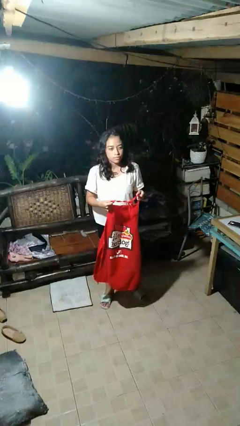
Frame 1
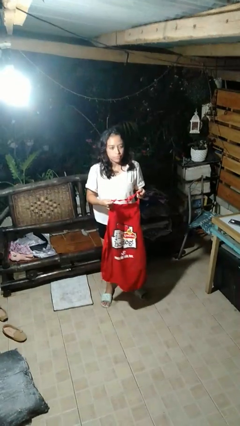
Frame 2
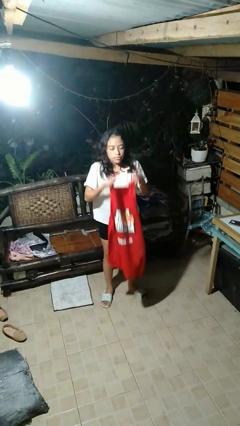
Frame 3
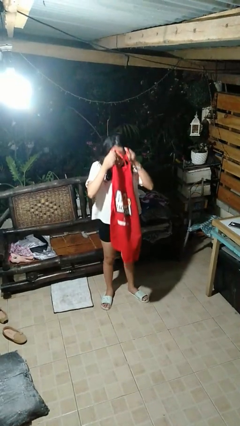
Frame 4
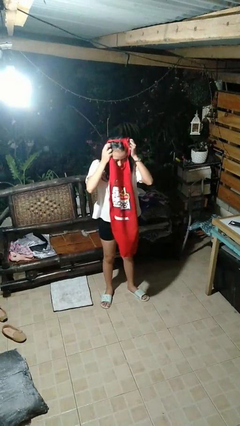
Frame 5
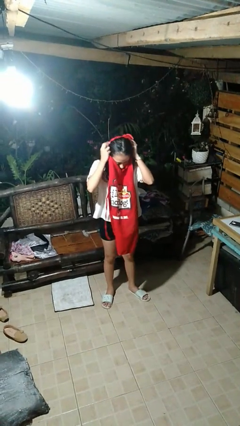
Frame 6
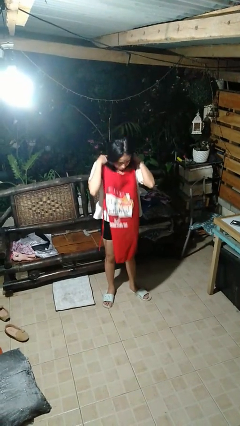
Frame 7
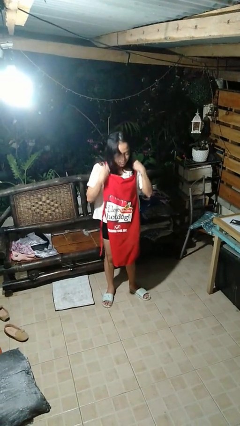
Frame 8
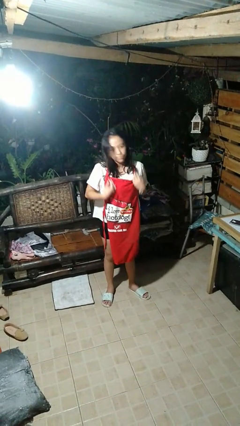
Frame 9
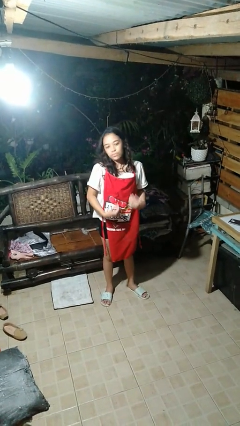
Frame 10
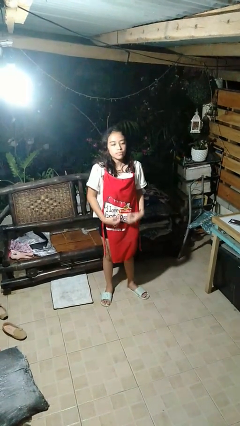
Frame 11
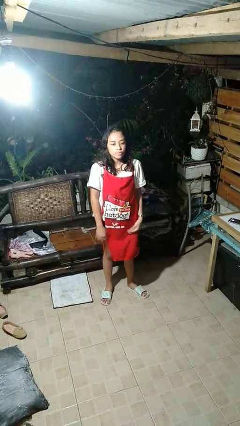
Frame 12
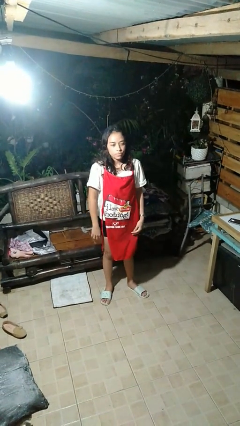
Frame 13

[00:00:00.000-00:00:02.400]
person puts on apron

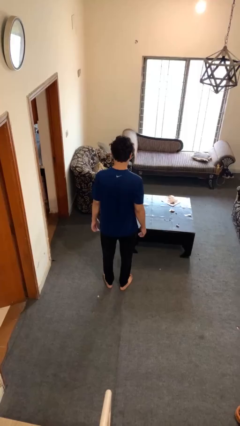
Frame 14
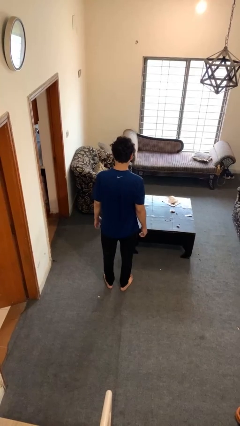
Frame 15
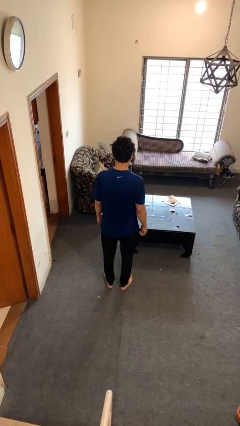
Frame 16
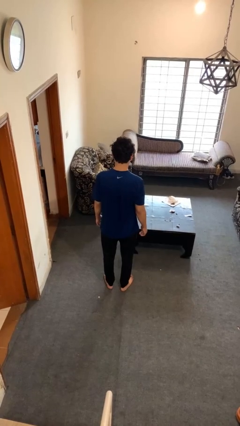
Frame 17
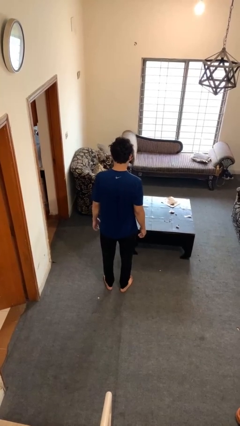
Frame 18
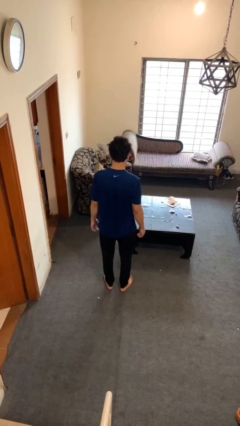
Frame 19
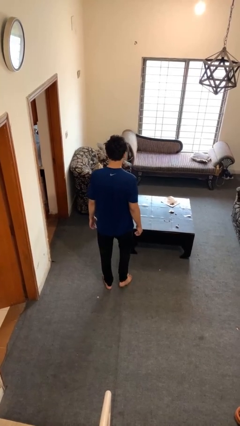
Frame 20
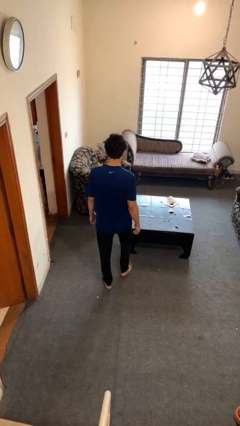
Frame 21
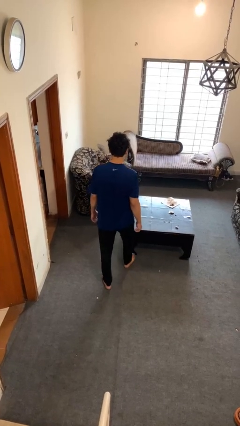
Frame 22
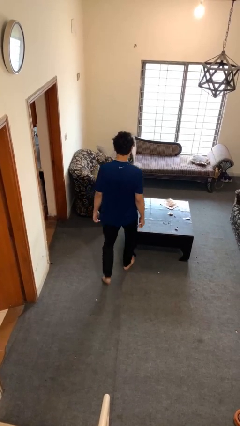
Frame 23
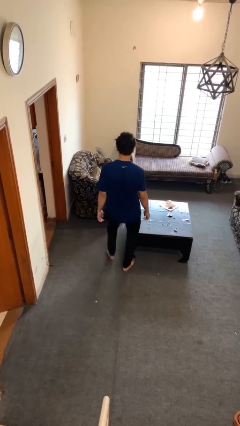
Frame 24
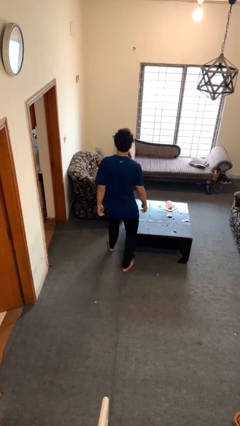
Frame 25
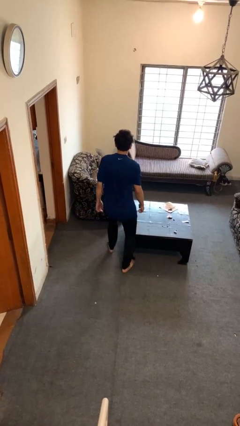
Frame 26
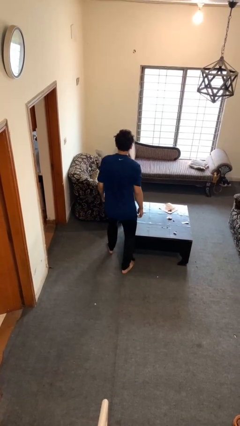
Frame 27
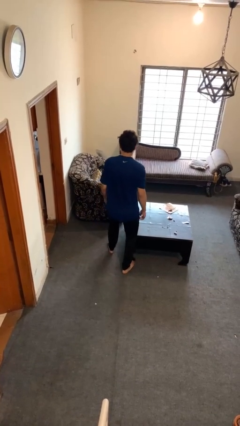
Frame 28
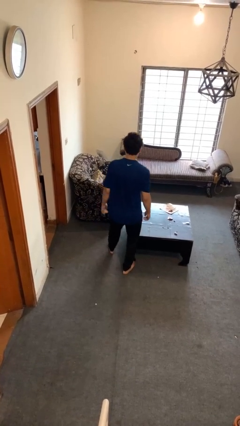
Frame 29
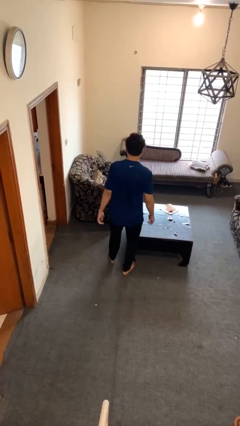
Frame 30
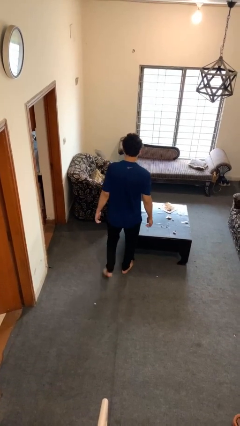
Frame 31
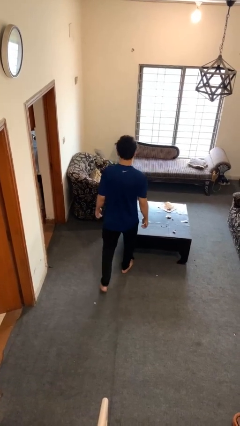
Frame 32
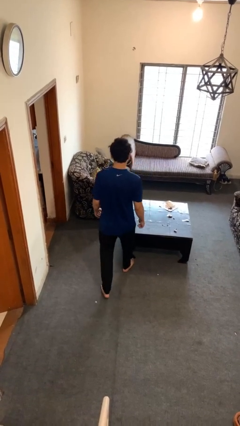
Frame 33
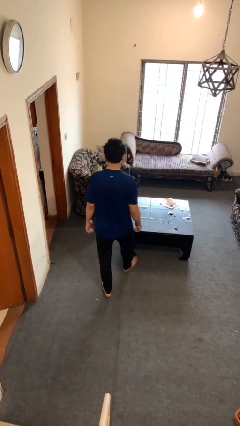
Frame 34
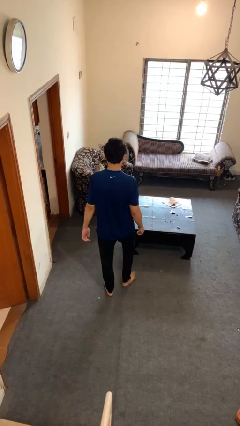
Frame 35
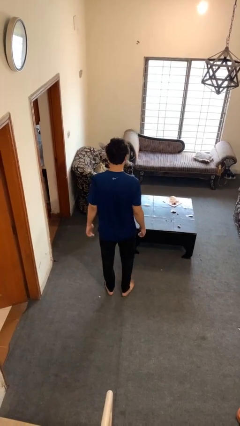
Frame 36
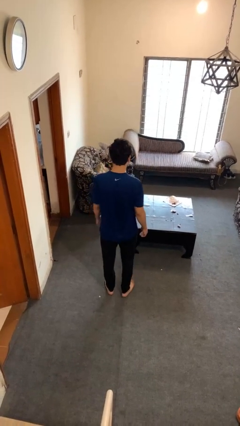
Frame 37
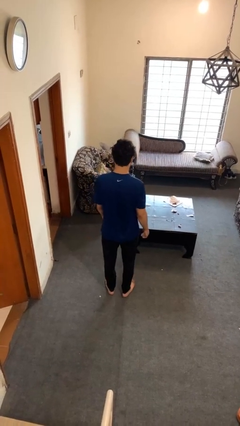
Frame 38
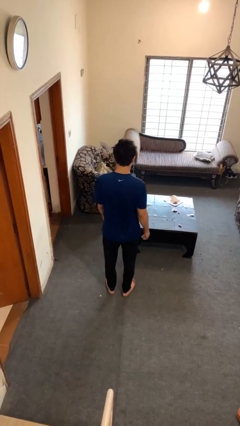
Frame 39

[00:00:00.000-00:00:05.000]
person bumps into table

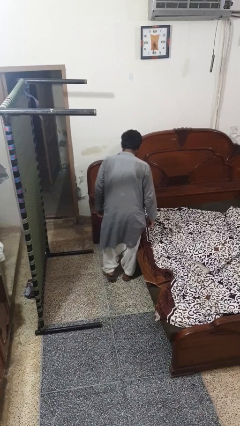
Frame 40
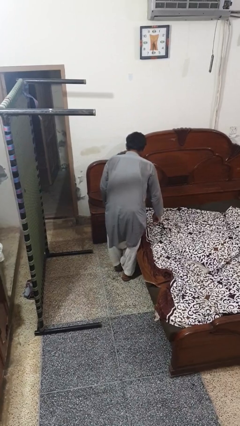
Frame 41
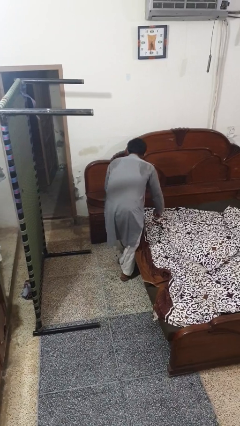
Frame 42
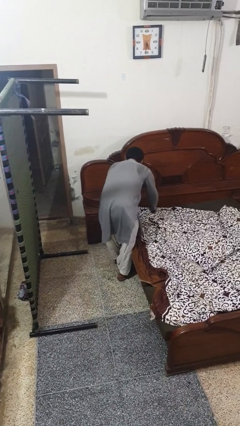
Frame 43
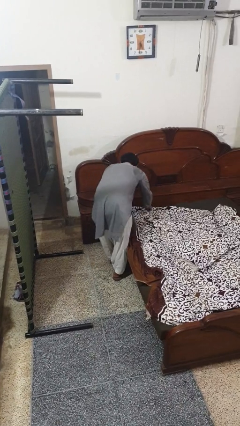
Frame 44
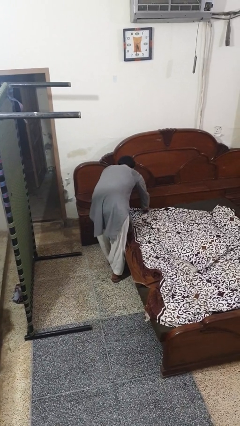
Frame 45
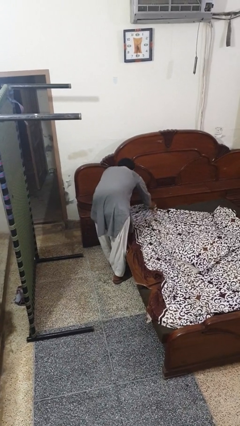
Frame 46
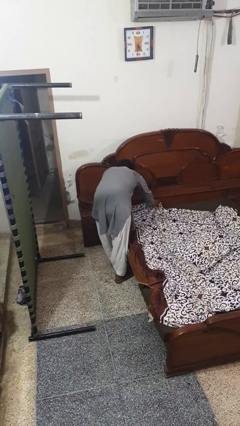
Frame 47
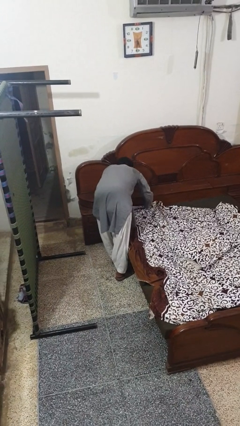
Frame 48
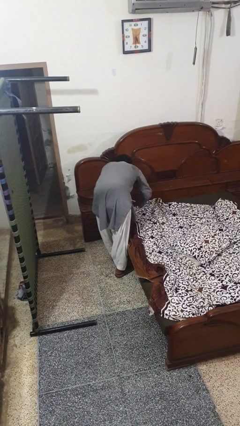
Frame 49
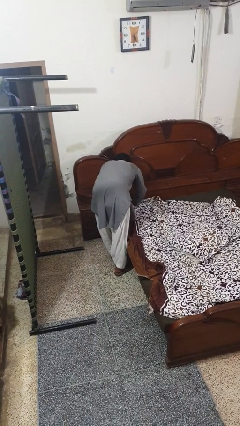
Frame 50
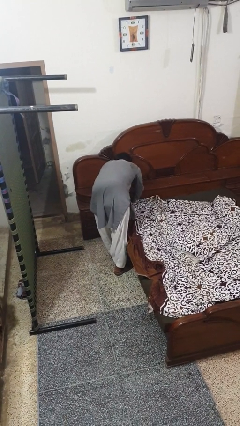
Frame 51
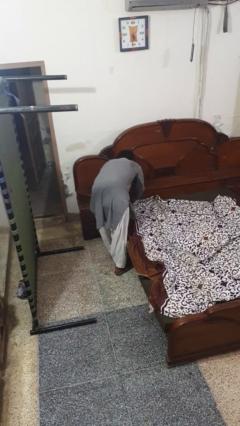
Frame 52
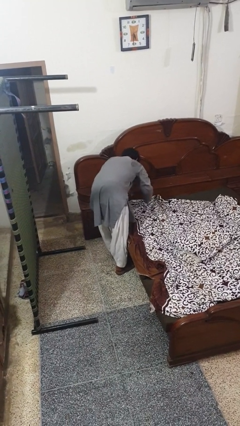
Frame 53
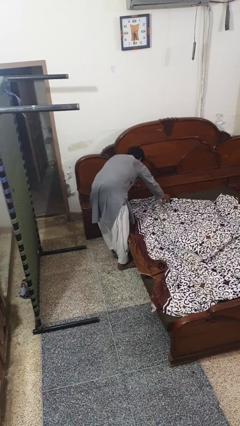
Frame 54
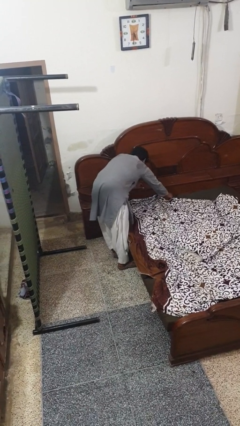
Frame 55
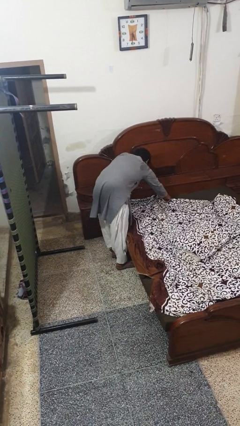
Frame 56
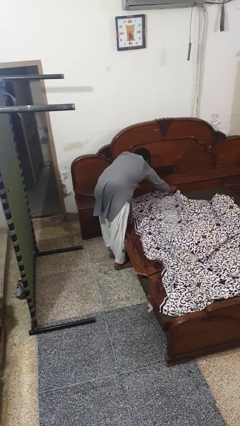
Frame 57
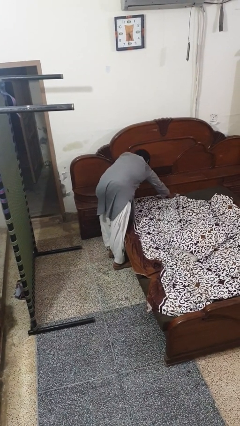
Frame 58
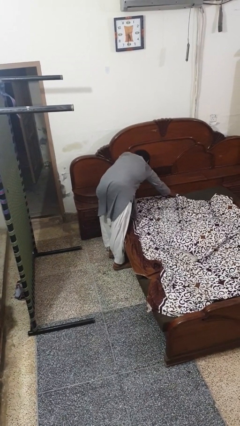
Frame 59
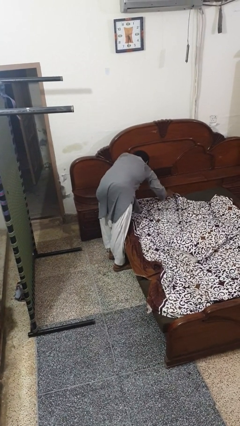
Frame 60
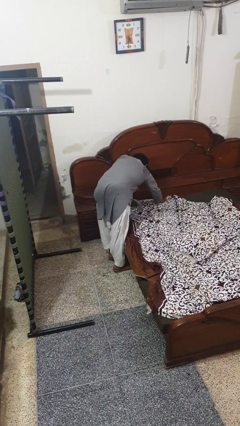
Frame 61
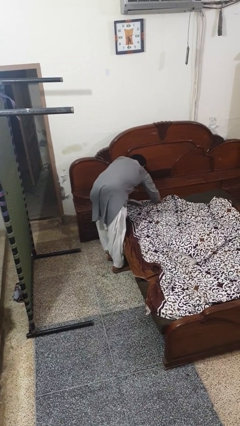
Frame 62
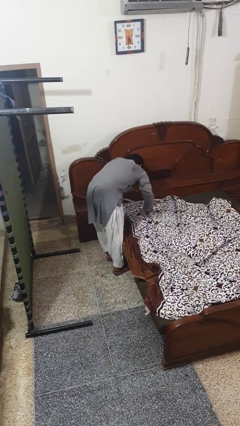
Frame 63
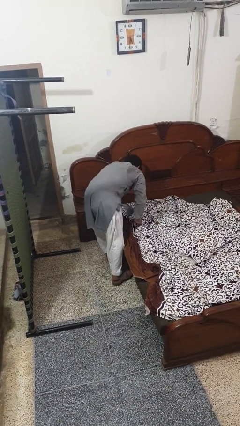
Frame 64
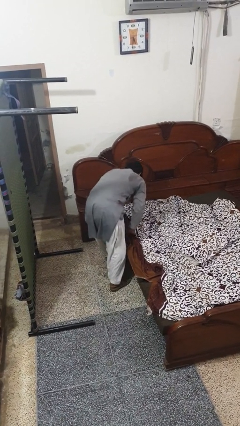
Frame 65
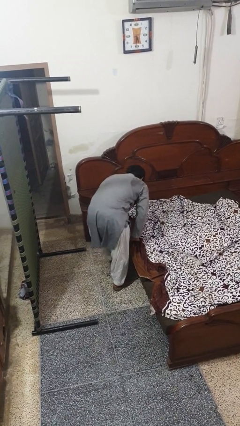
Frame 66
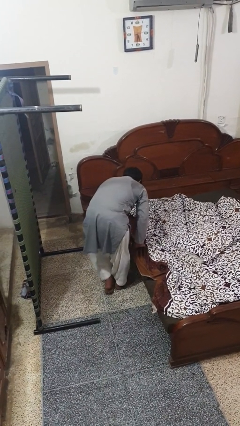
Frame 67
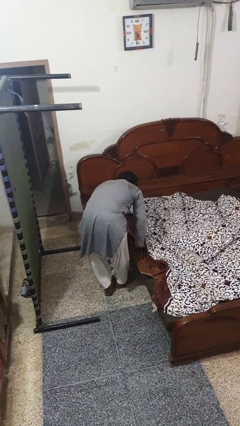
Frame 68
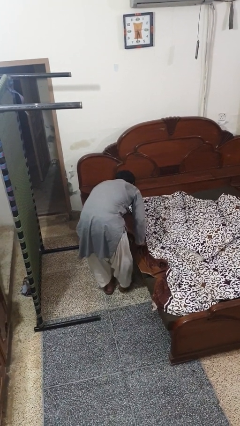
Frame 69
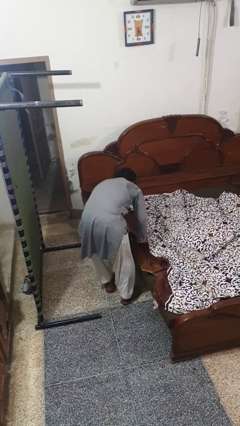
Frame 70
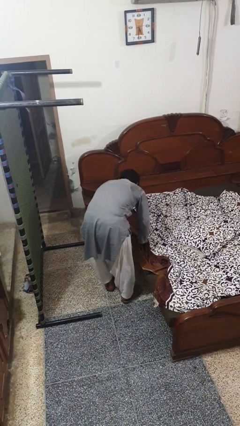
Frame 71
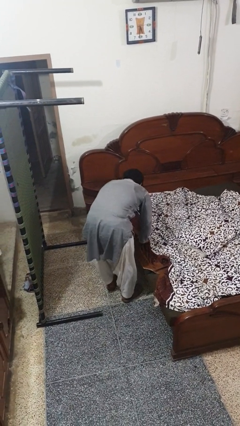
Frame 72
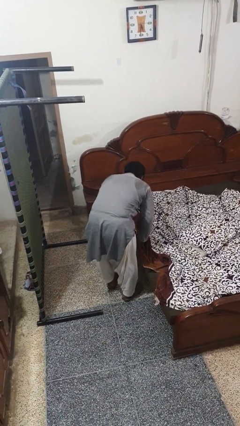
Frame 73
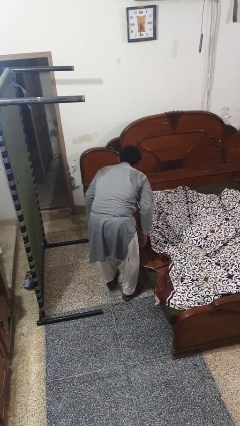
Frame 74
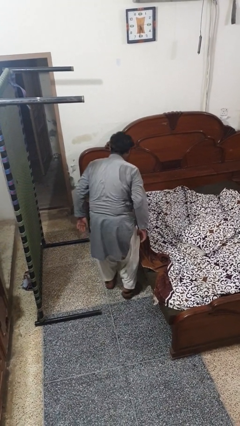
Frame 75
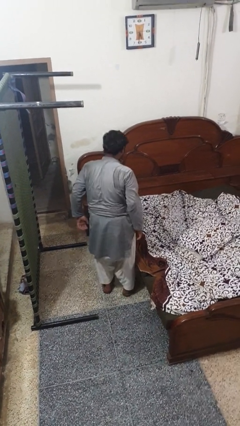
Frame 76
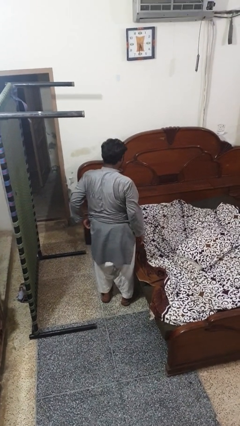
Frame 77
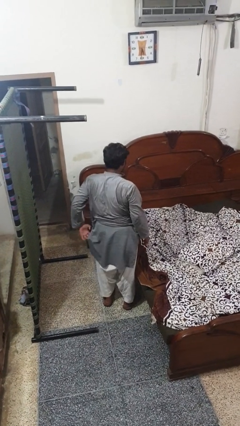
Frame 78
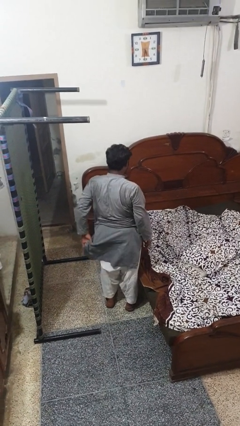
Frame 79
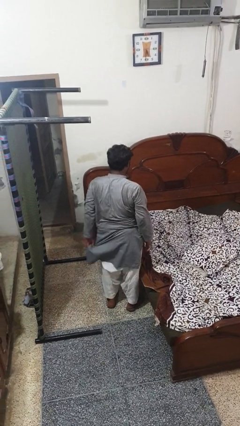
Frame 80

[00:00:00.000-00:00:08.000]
person makes bed

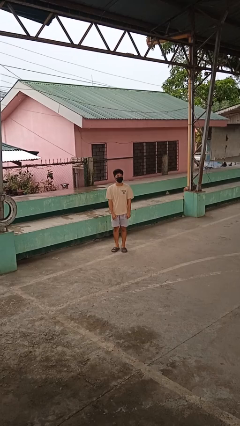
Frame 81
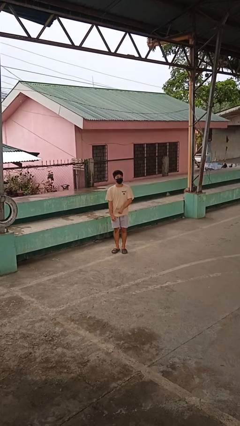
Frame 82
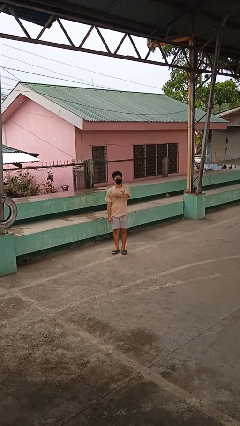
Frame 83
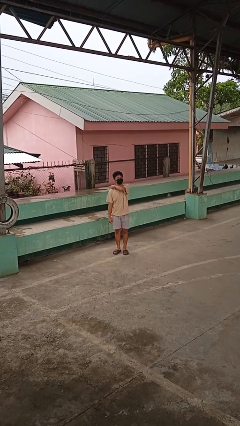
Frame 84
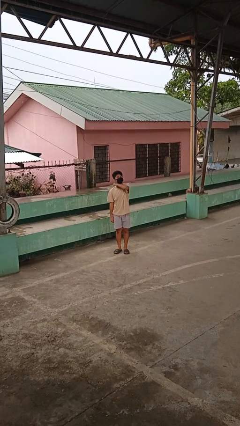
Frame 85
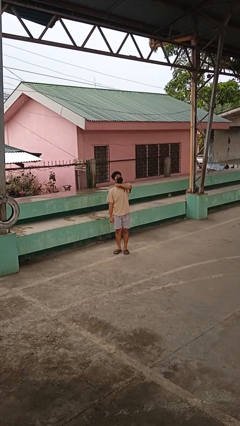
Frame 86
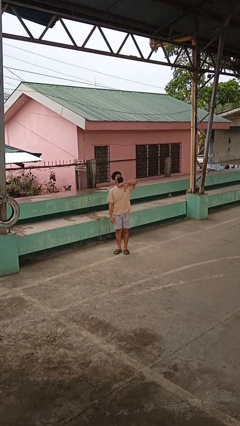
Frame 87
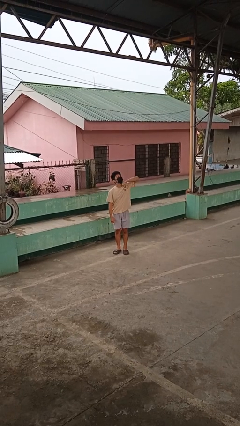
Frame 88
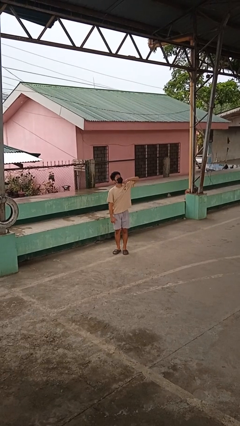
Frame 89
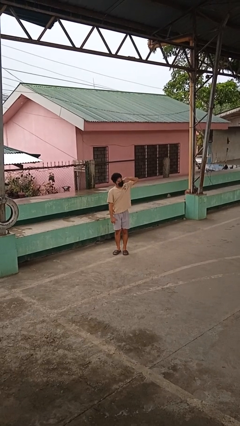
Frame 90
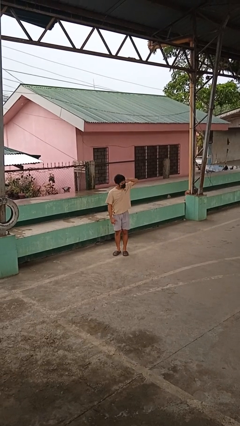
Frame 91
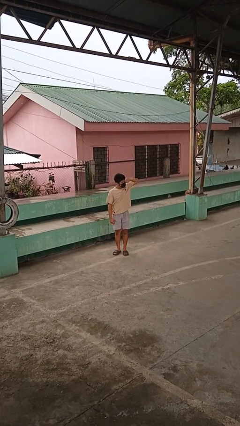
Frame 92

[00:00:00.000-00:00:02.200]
person gestures cut

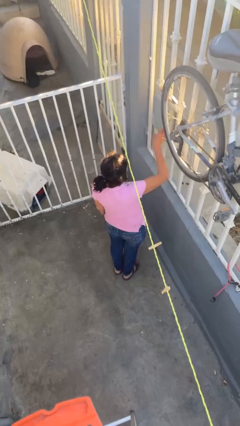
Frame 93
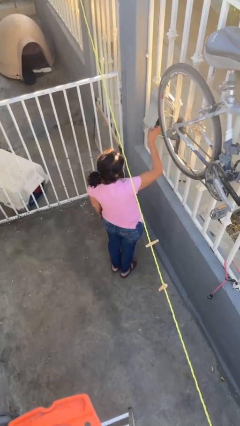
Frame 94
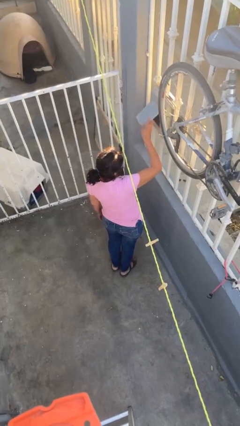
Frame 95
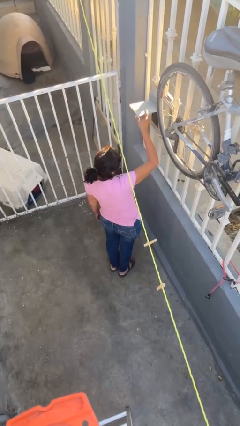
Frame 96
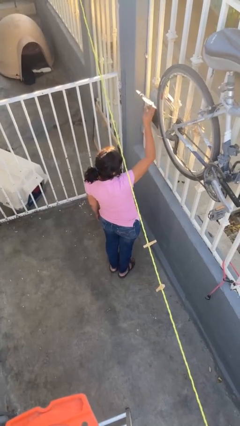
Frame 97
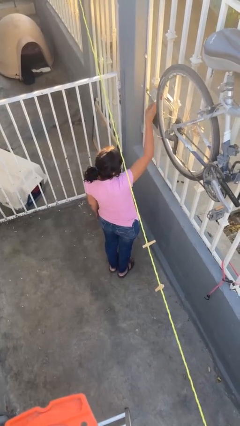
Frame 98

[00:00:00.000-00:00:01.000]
person opens mailbox
